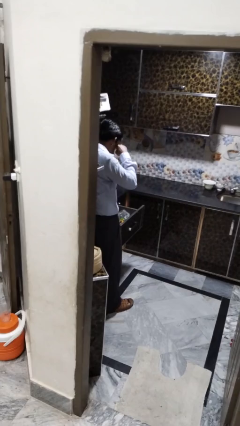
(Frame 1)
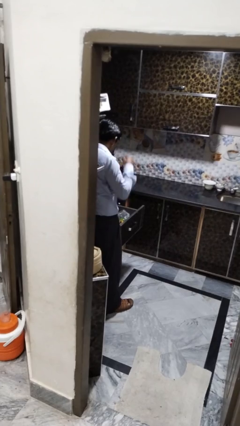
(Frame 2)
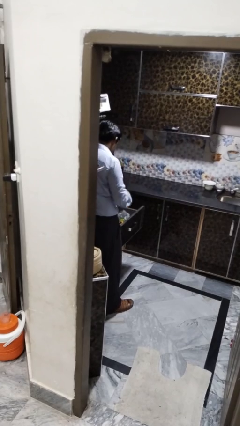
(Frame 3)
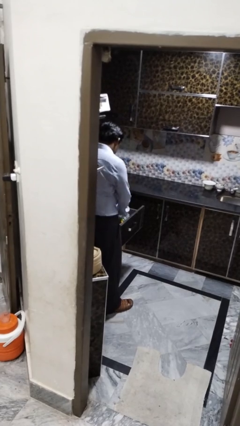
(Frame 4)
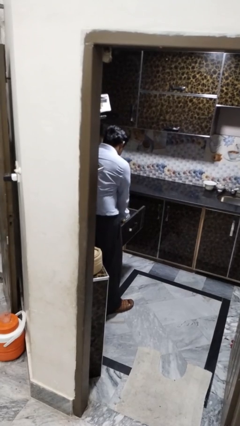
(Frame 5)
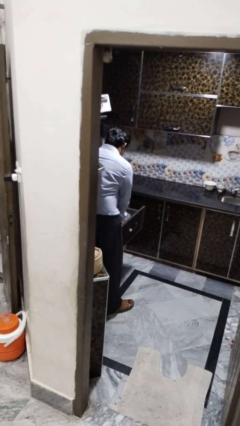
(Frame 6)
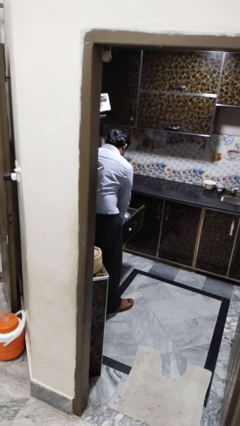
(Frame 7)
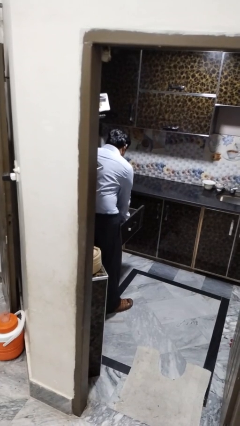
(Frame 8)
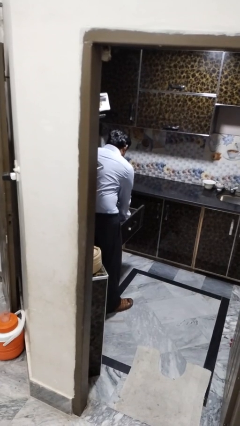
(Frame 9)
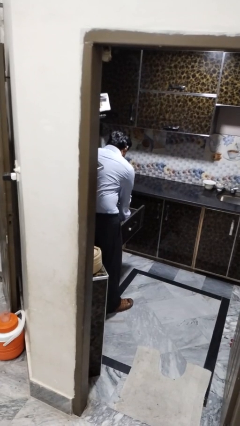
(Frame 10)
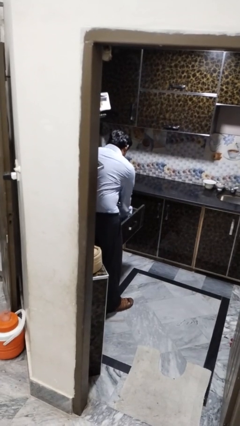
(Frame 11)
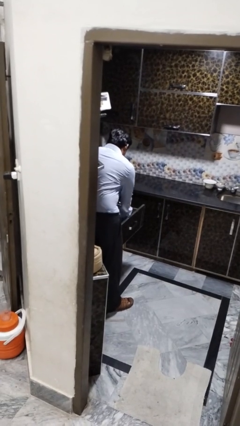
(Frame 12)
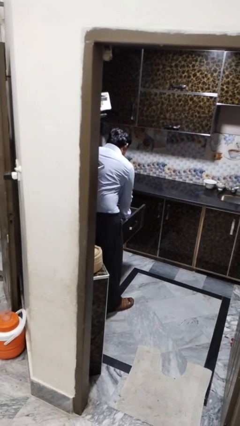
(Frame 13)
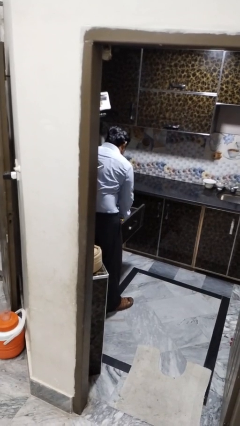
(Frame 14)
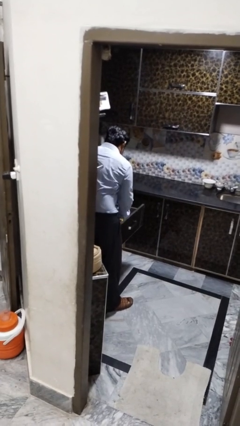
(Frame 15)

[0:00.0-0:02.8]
person searches in kitchen drawer

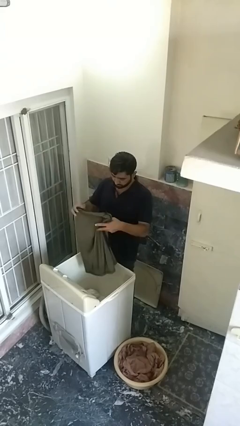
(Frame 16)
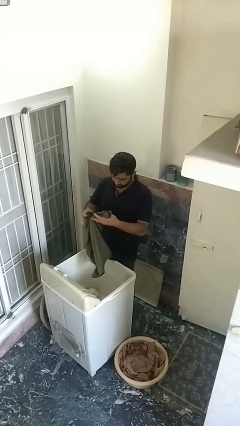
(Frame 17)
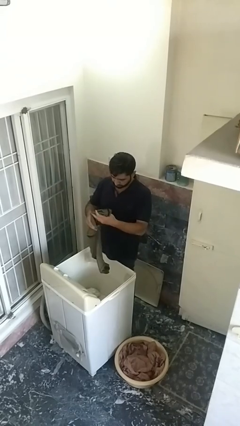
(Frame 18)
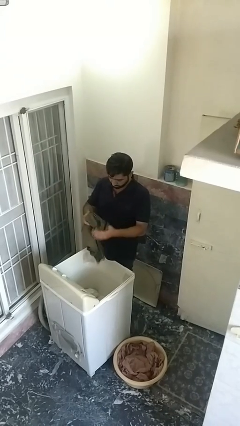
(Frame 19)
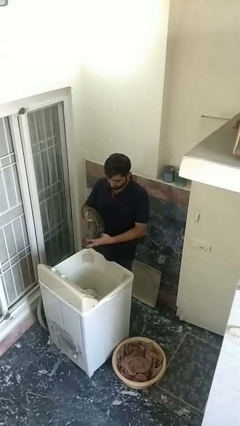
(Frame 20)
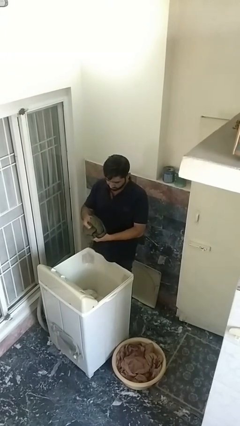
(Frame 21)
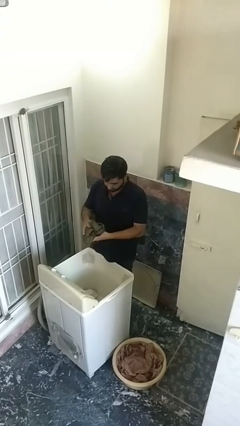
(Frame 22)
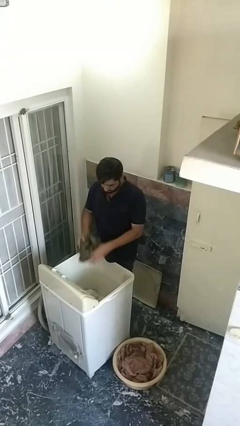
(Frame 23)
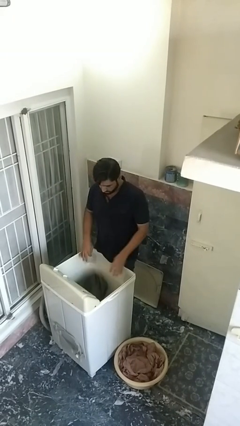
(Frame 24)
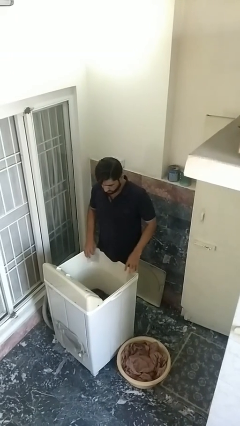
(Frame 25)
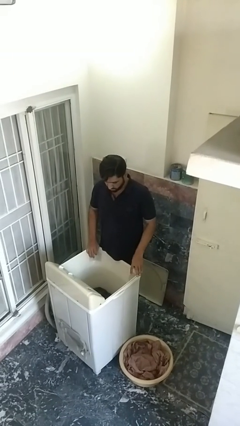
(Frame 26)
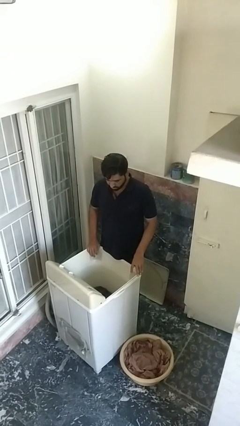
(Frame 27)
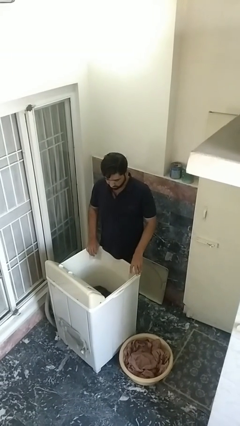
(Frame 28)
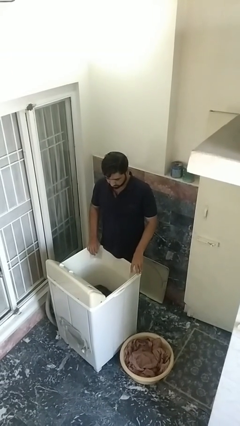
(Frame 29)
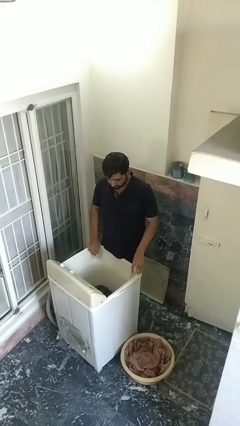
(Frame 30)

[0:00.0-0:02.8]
person loads clotheswasher

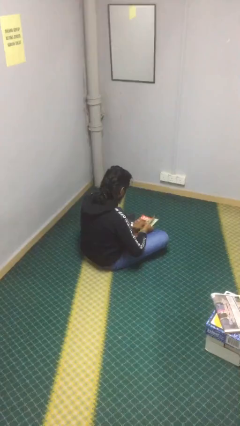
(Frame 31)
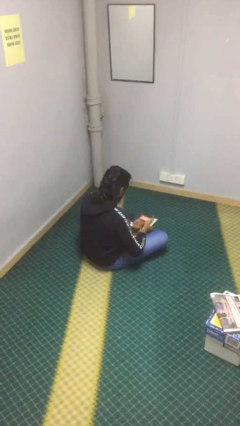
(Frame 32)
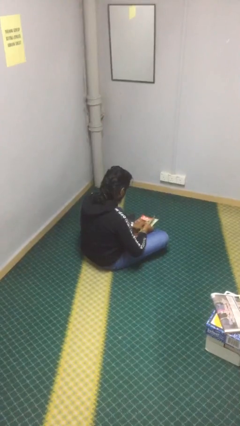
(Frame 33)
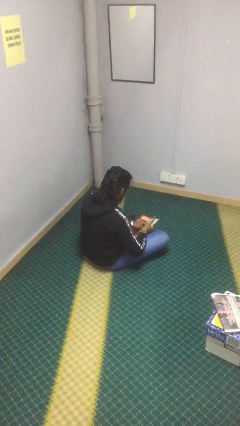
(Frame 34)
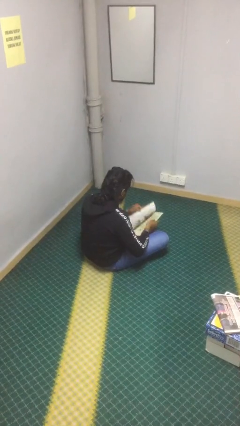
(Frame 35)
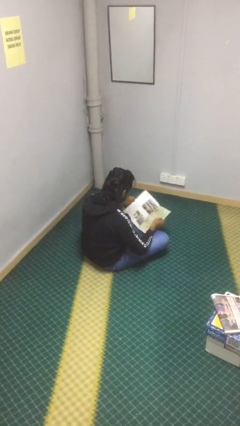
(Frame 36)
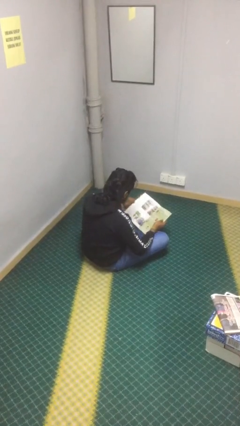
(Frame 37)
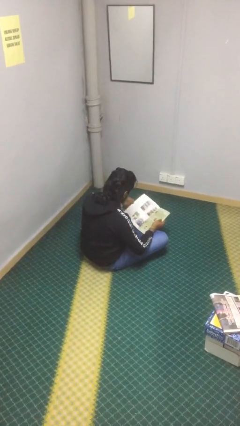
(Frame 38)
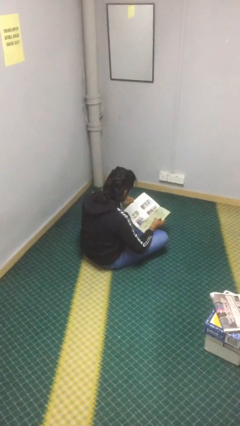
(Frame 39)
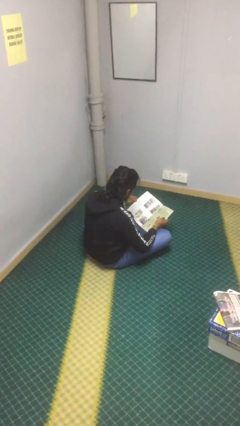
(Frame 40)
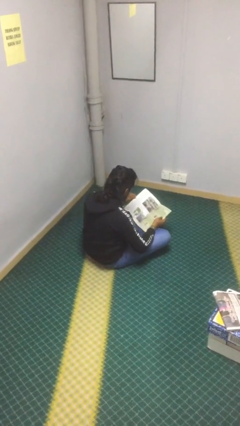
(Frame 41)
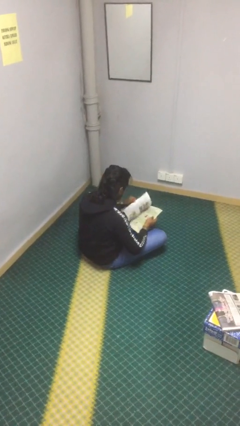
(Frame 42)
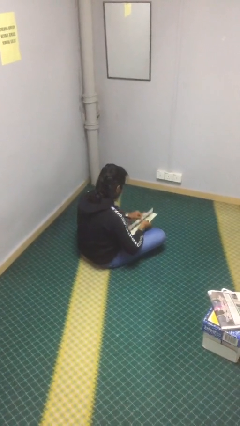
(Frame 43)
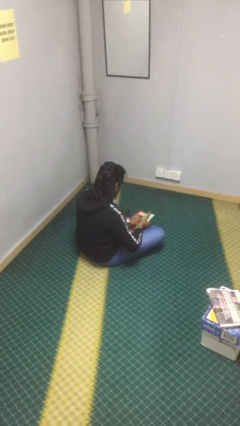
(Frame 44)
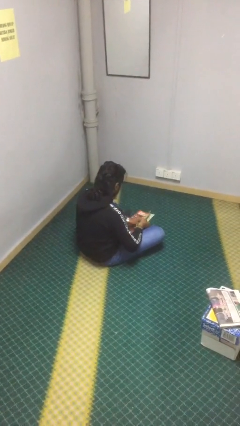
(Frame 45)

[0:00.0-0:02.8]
person reads magazine

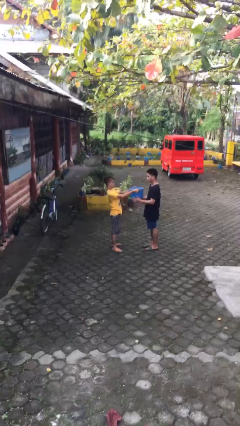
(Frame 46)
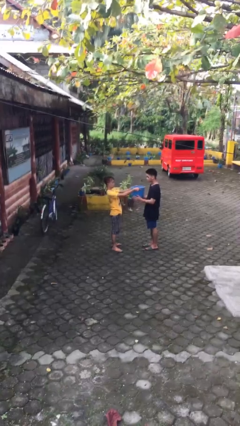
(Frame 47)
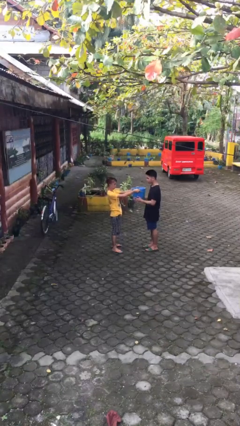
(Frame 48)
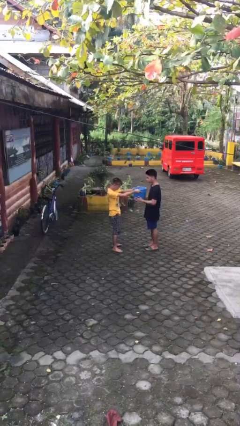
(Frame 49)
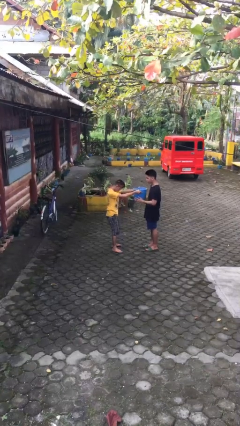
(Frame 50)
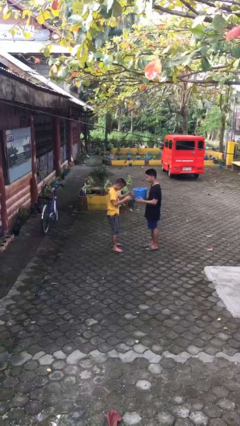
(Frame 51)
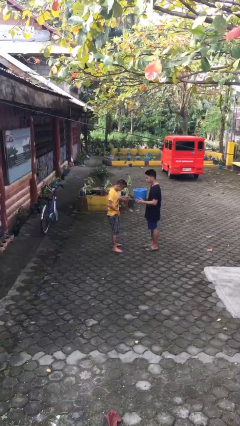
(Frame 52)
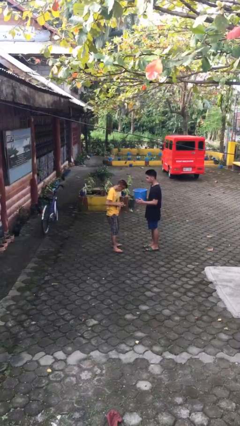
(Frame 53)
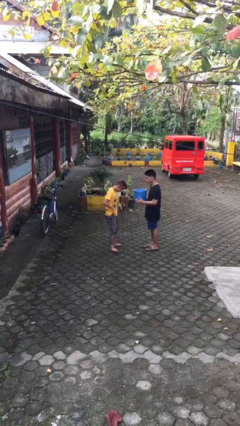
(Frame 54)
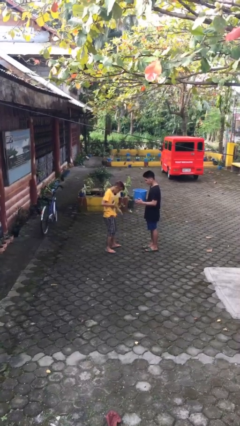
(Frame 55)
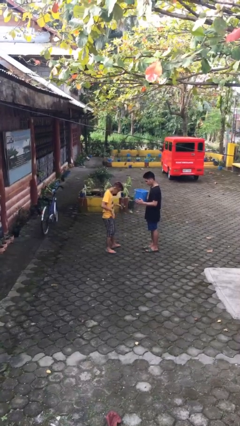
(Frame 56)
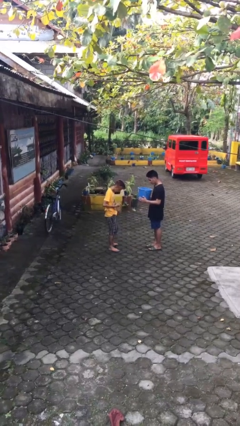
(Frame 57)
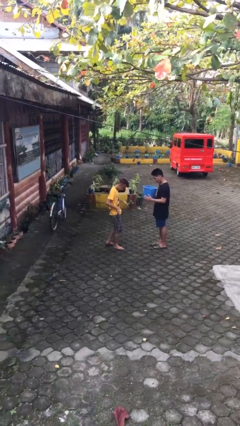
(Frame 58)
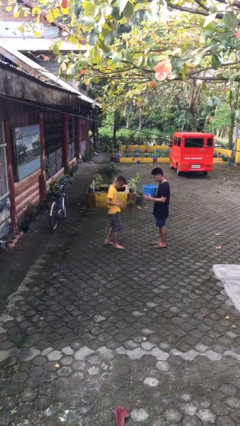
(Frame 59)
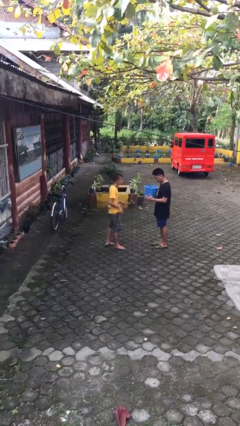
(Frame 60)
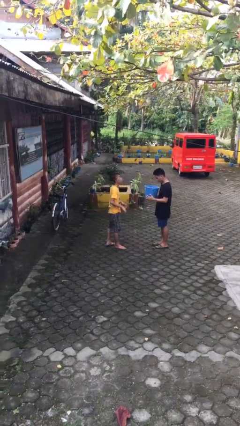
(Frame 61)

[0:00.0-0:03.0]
person transfers object to person

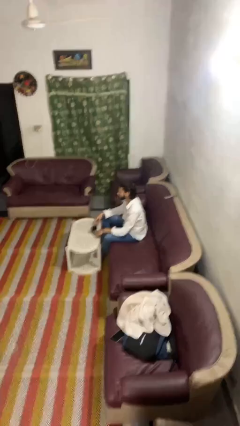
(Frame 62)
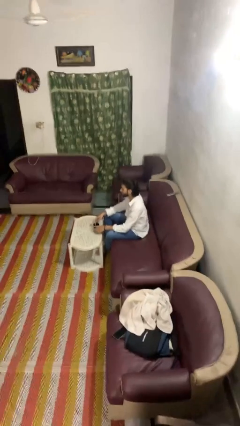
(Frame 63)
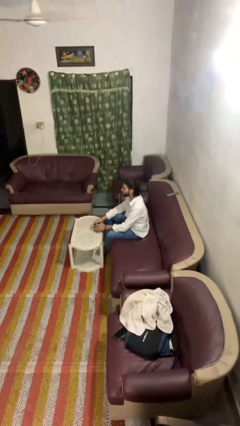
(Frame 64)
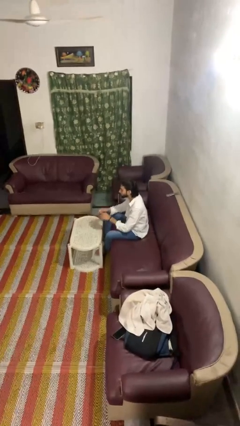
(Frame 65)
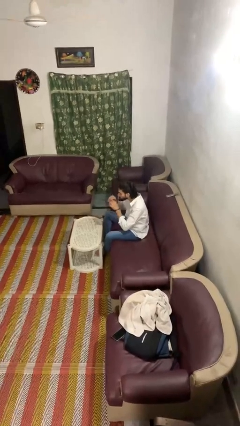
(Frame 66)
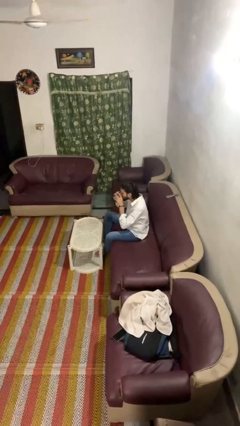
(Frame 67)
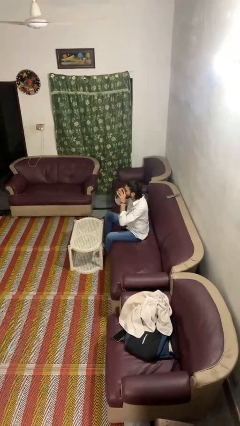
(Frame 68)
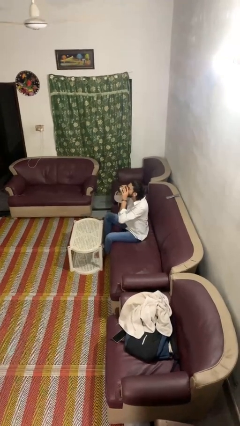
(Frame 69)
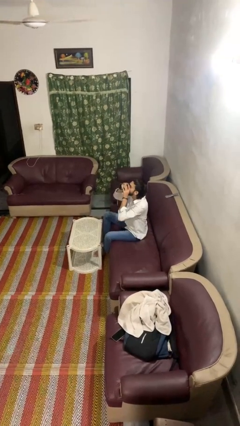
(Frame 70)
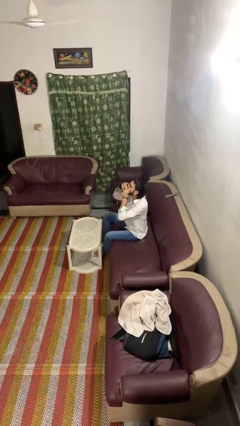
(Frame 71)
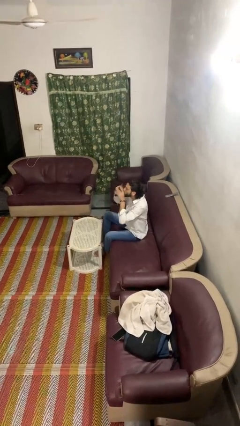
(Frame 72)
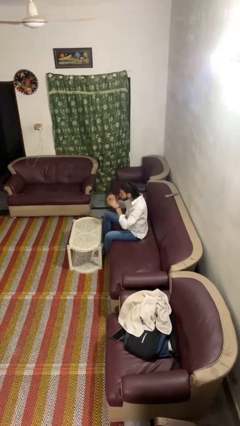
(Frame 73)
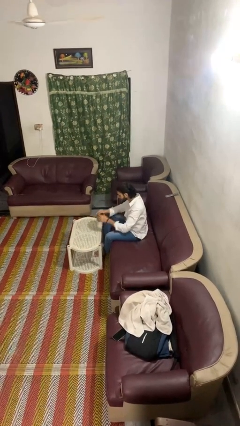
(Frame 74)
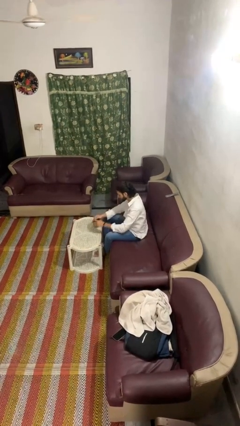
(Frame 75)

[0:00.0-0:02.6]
person drinks from mug

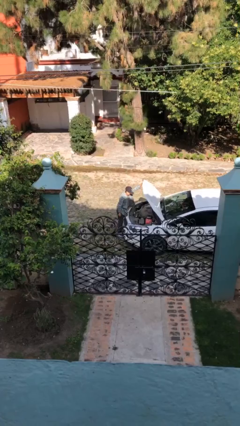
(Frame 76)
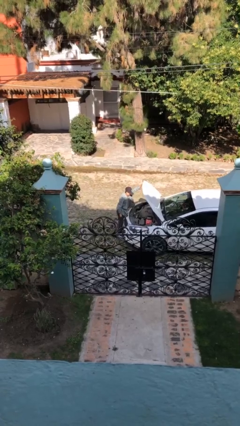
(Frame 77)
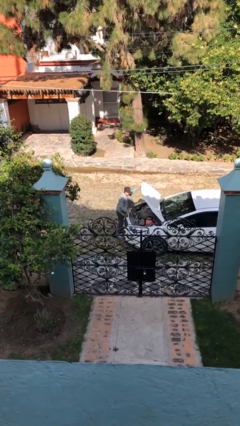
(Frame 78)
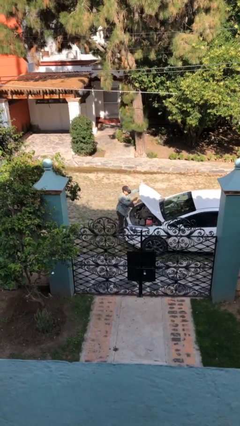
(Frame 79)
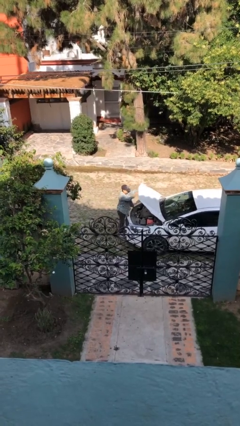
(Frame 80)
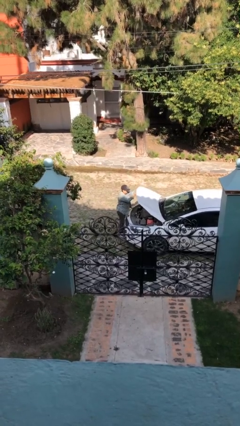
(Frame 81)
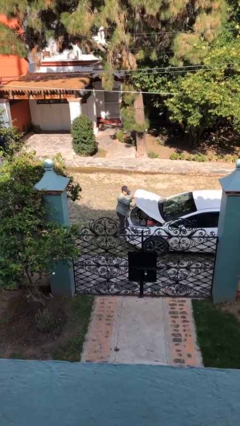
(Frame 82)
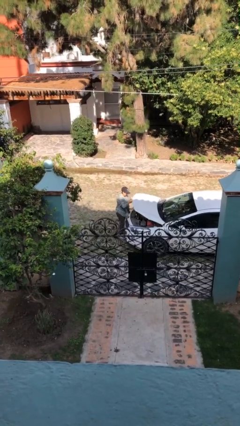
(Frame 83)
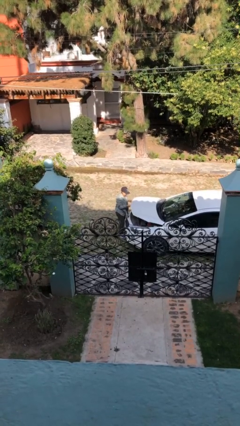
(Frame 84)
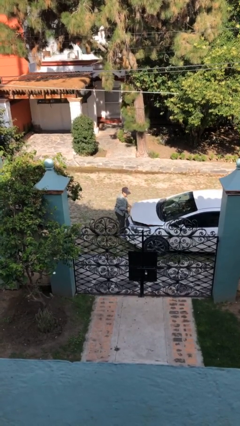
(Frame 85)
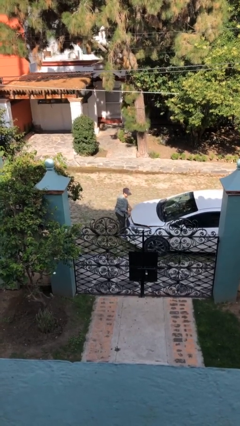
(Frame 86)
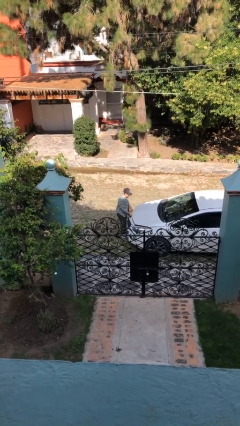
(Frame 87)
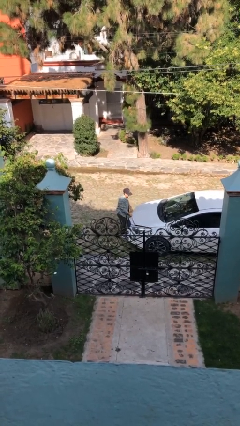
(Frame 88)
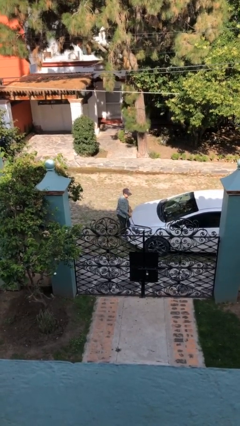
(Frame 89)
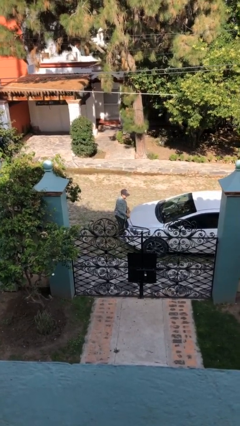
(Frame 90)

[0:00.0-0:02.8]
person closes car hood

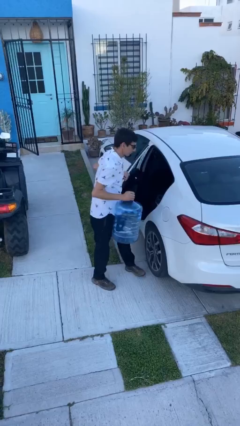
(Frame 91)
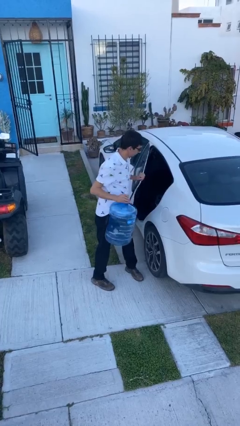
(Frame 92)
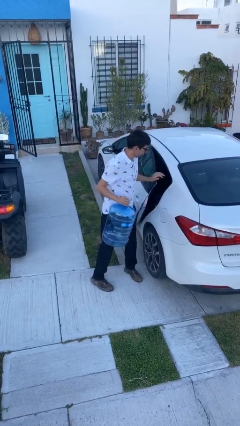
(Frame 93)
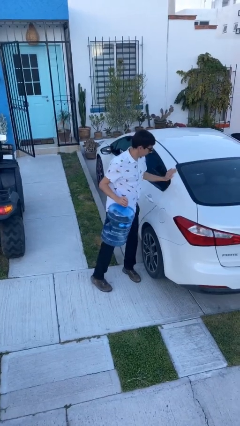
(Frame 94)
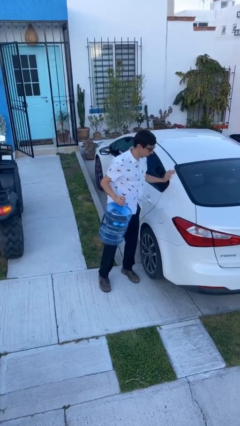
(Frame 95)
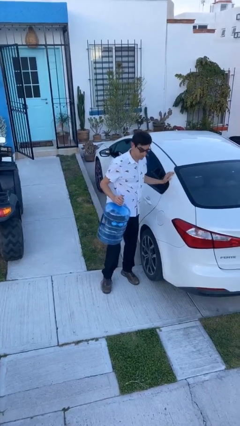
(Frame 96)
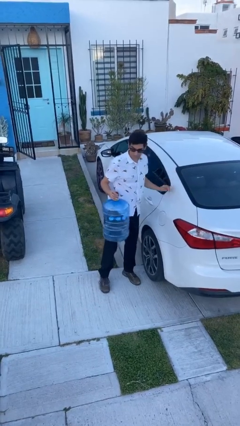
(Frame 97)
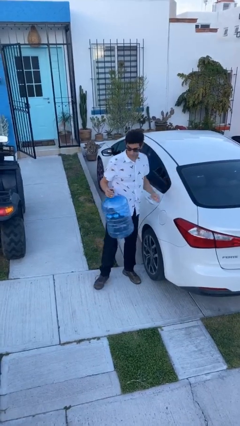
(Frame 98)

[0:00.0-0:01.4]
person closes car door
